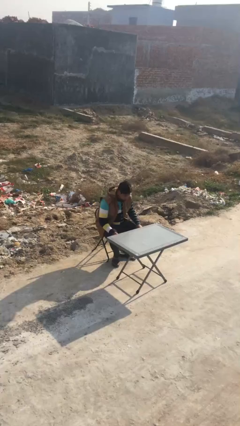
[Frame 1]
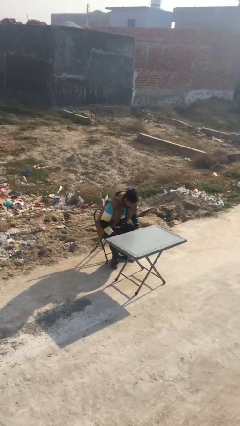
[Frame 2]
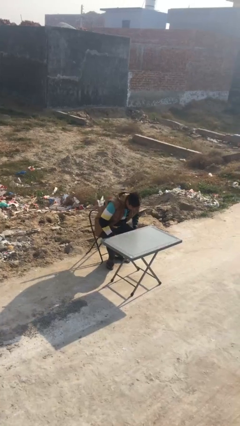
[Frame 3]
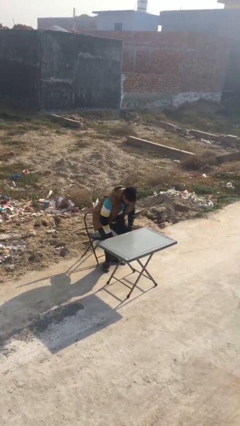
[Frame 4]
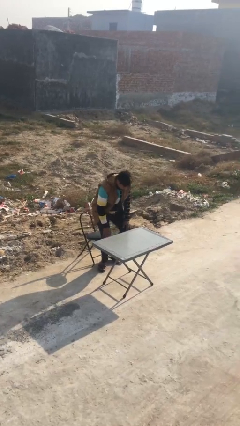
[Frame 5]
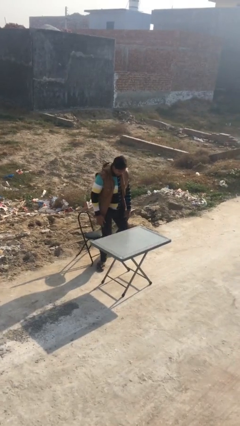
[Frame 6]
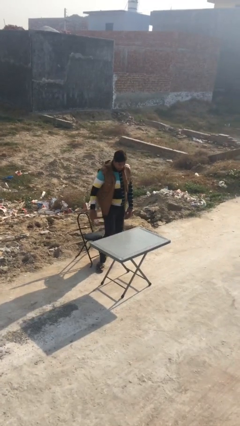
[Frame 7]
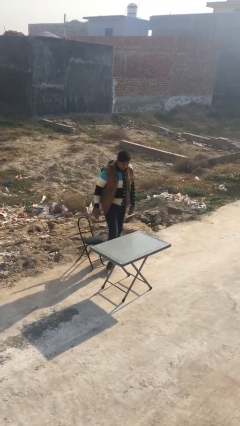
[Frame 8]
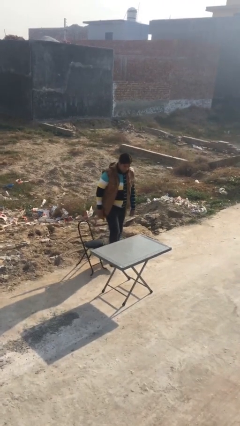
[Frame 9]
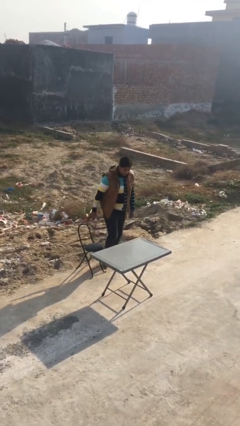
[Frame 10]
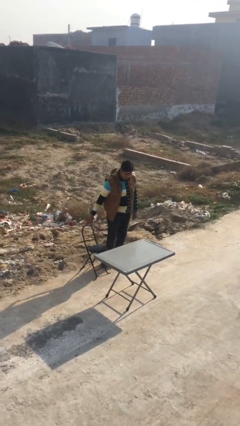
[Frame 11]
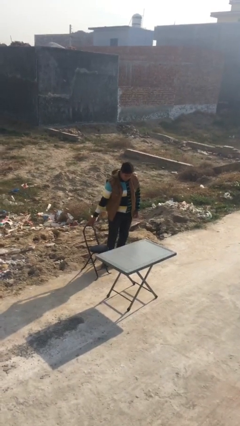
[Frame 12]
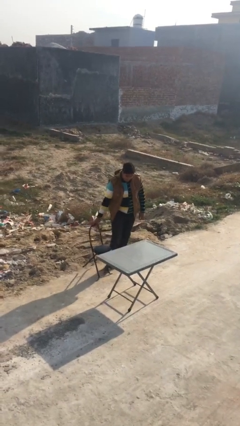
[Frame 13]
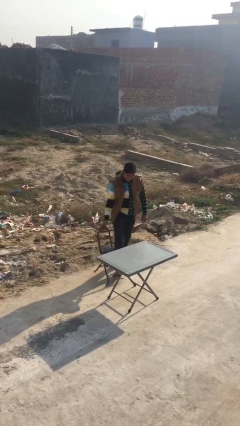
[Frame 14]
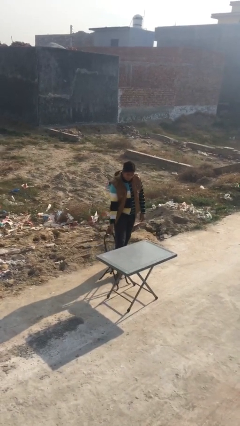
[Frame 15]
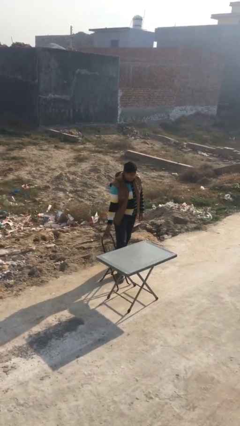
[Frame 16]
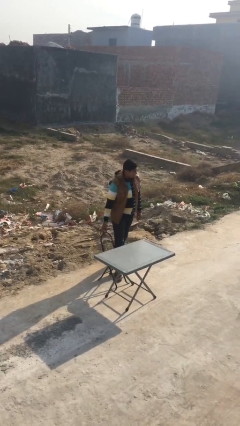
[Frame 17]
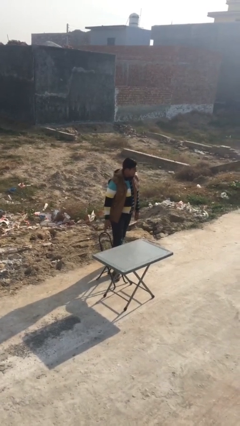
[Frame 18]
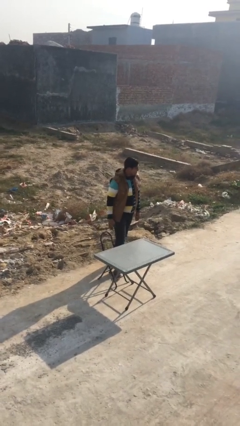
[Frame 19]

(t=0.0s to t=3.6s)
person stands up

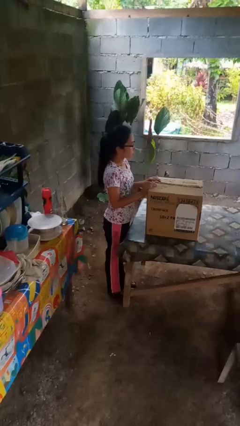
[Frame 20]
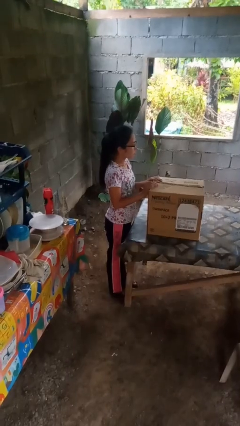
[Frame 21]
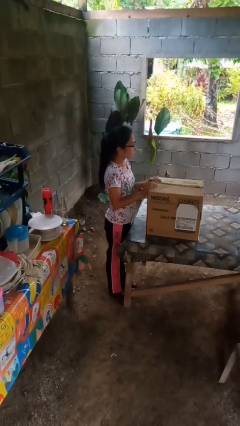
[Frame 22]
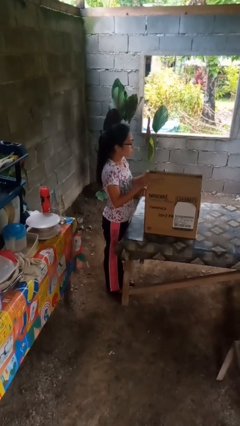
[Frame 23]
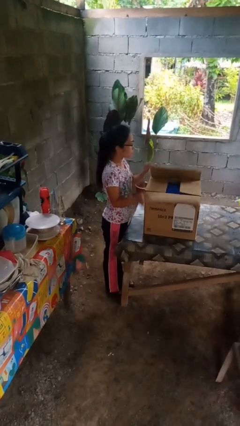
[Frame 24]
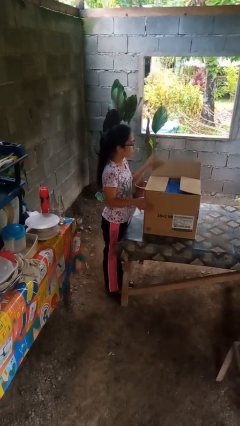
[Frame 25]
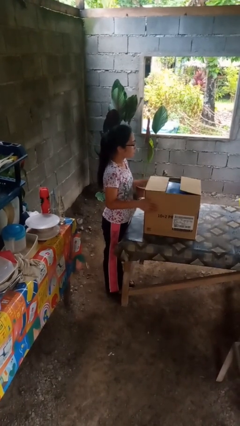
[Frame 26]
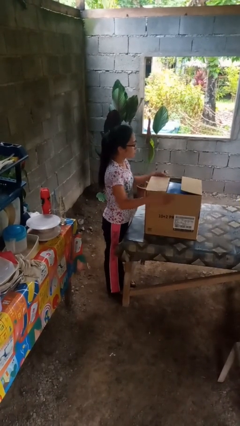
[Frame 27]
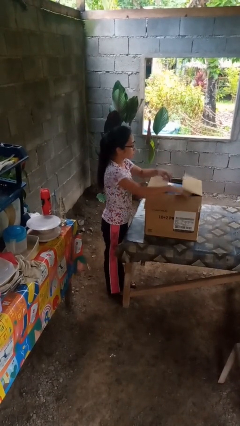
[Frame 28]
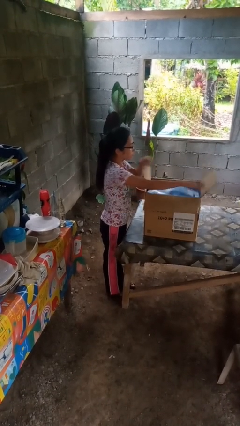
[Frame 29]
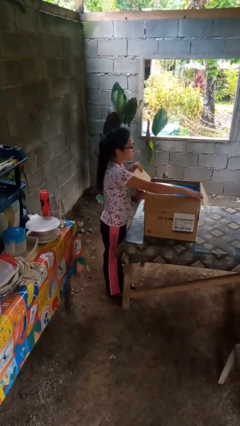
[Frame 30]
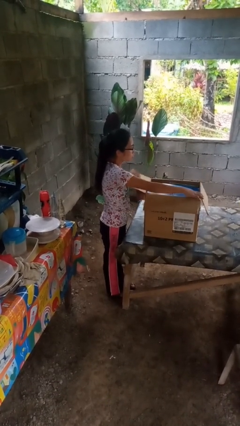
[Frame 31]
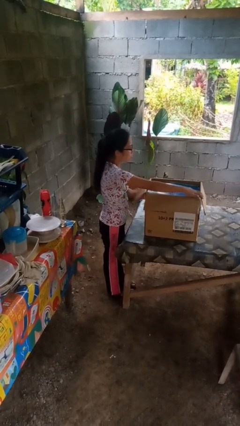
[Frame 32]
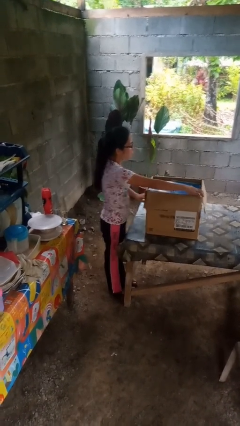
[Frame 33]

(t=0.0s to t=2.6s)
person opens box

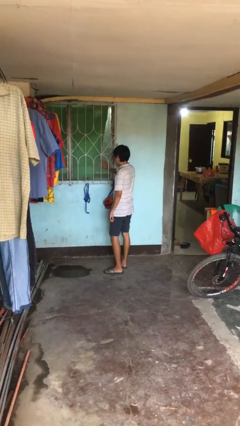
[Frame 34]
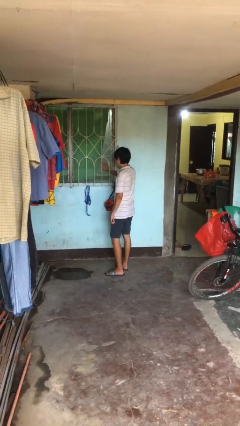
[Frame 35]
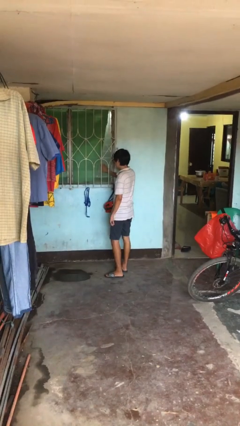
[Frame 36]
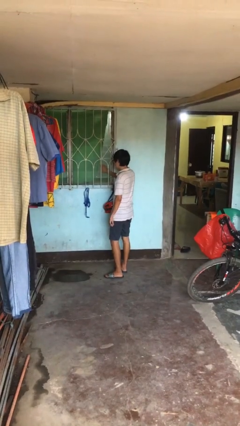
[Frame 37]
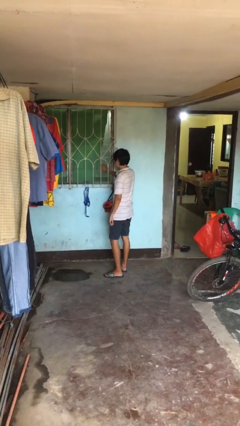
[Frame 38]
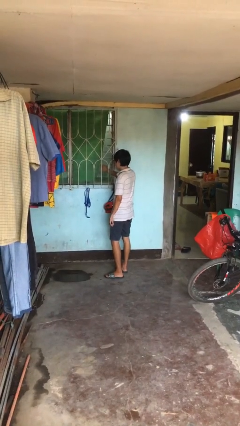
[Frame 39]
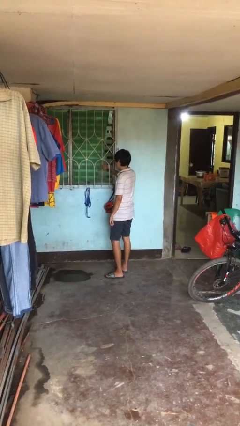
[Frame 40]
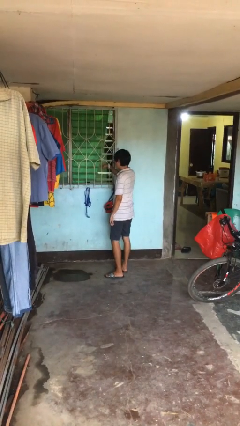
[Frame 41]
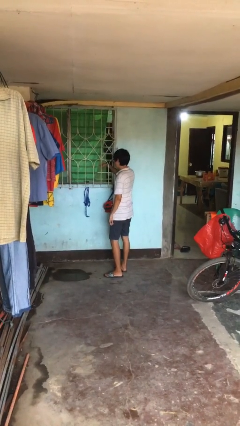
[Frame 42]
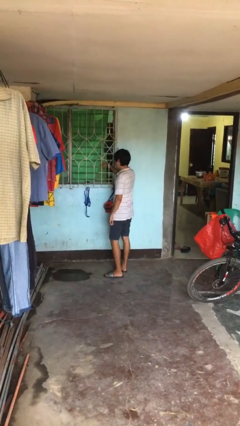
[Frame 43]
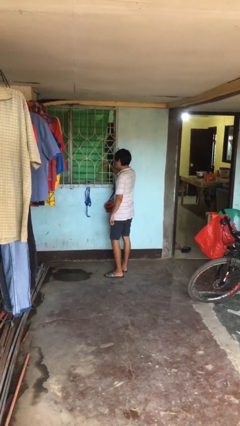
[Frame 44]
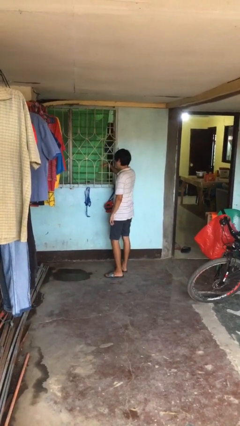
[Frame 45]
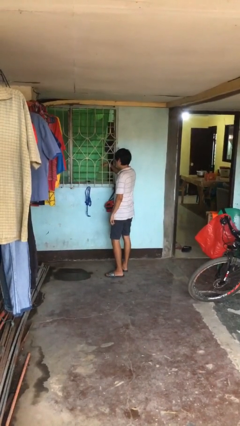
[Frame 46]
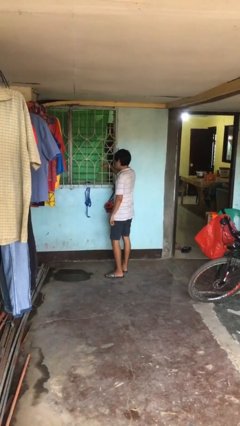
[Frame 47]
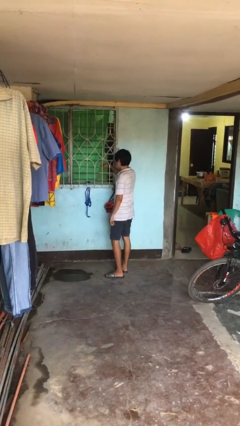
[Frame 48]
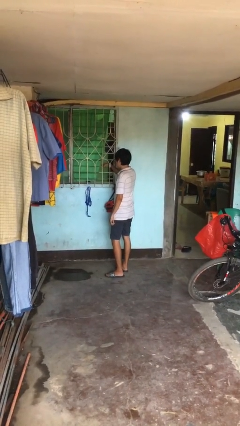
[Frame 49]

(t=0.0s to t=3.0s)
person opens home window

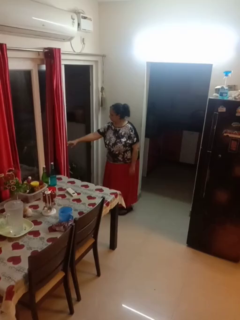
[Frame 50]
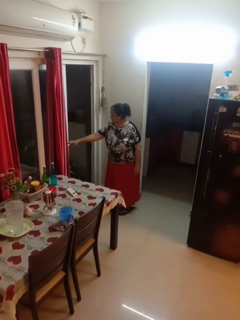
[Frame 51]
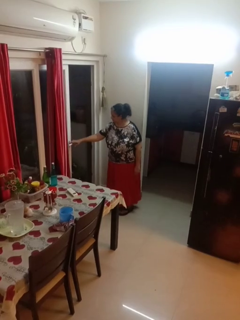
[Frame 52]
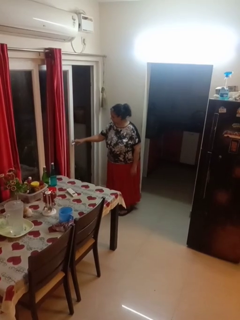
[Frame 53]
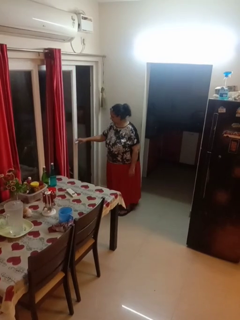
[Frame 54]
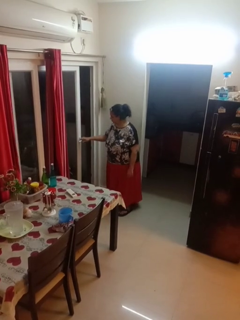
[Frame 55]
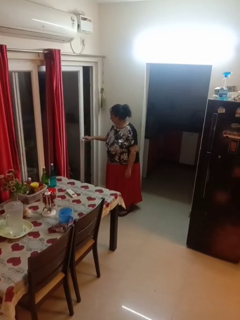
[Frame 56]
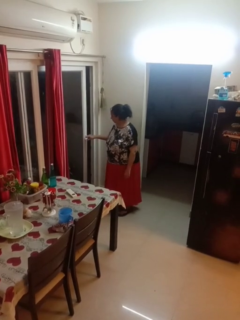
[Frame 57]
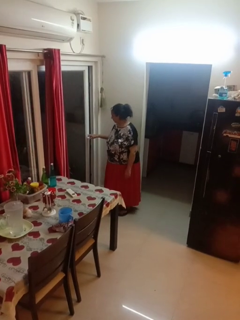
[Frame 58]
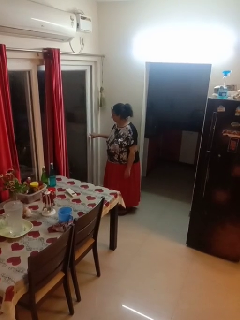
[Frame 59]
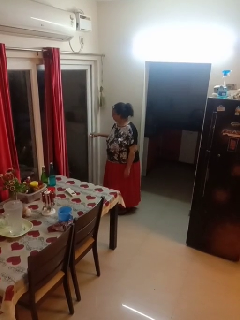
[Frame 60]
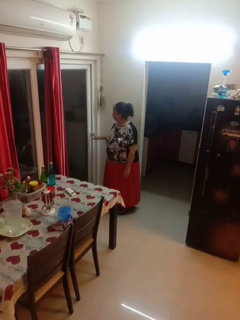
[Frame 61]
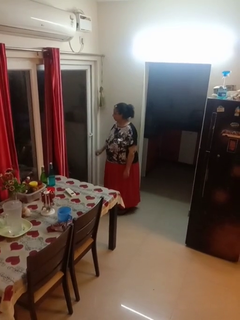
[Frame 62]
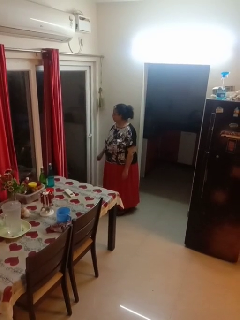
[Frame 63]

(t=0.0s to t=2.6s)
person closes sliding door

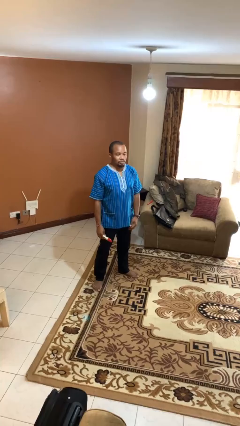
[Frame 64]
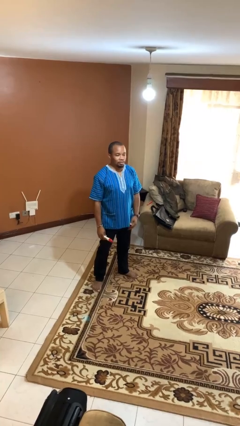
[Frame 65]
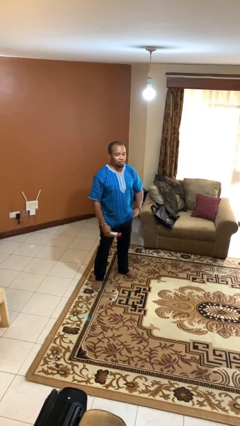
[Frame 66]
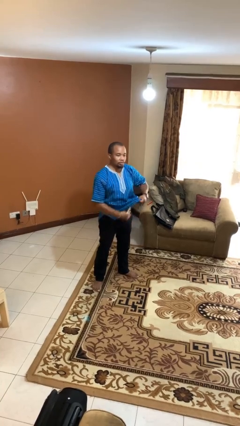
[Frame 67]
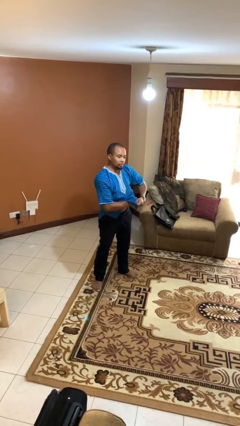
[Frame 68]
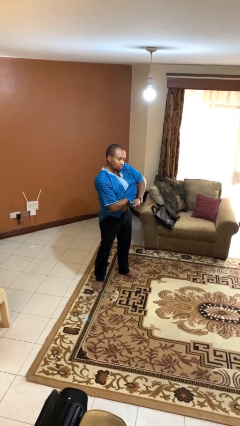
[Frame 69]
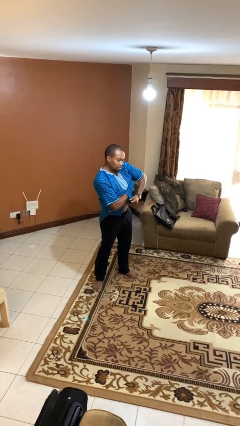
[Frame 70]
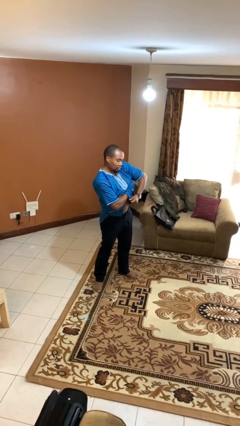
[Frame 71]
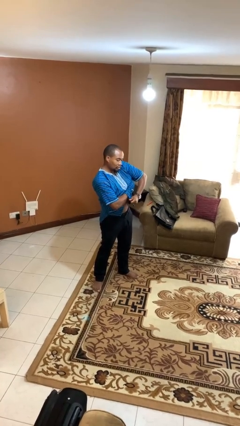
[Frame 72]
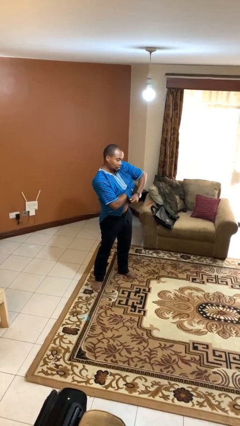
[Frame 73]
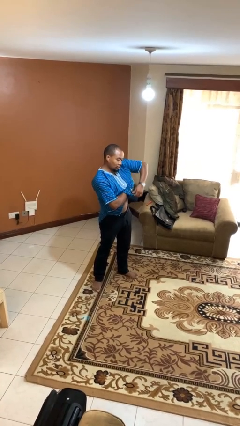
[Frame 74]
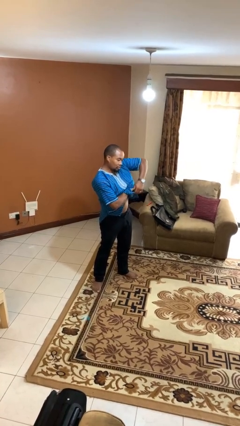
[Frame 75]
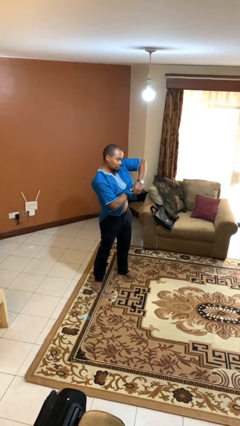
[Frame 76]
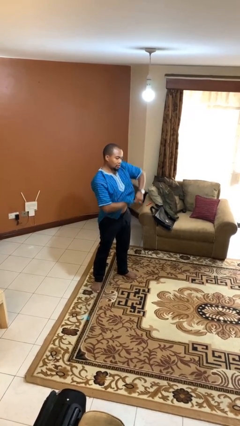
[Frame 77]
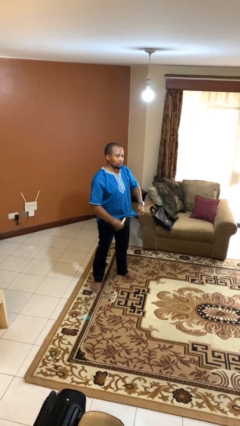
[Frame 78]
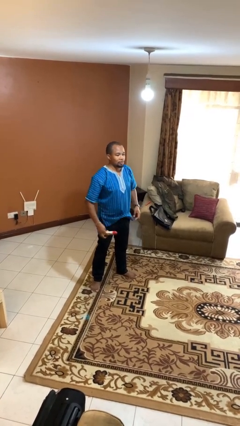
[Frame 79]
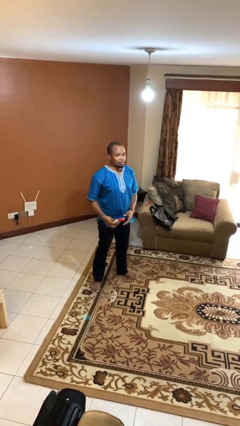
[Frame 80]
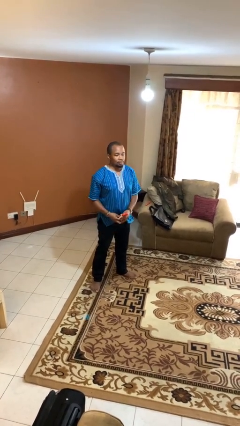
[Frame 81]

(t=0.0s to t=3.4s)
person applies deodorant

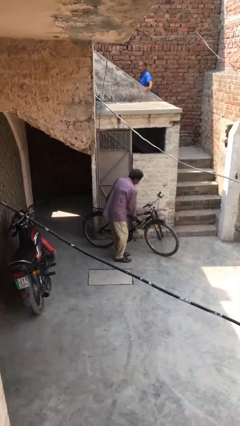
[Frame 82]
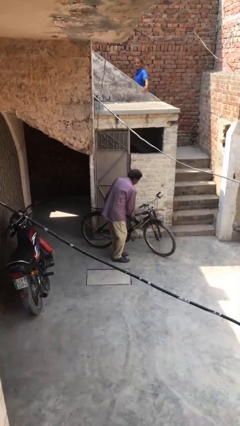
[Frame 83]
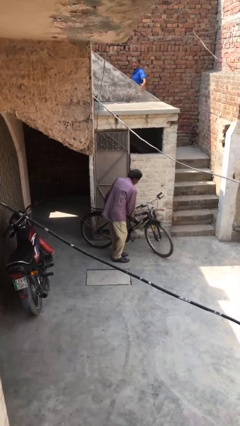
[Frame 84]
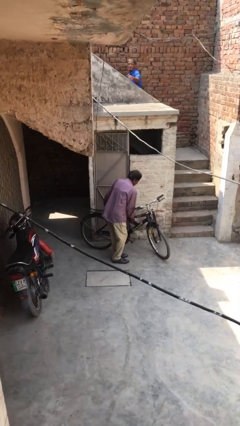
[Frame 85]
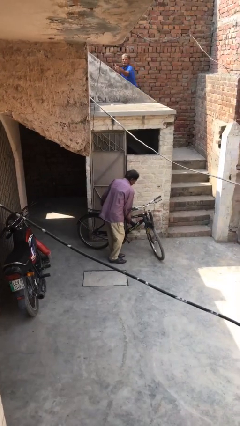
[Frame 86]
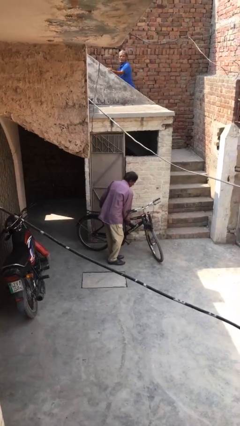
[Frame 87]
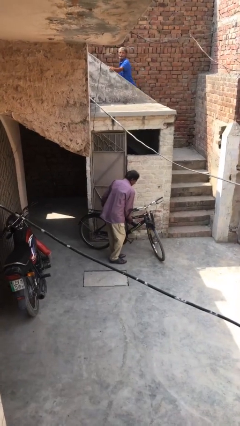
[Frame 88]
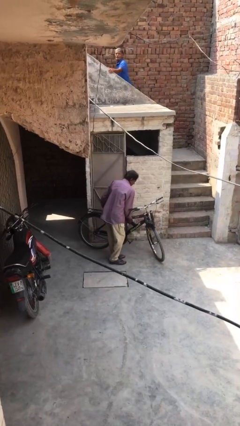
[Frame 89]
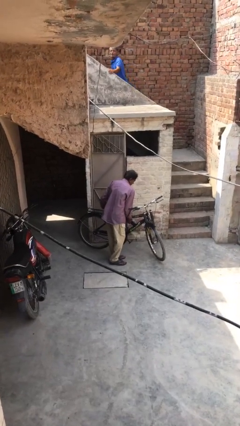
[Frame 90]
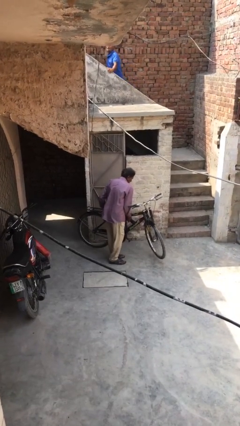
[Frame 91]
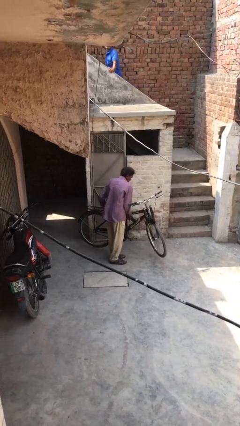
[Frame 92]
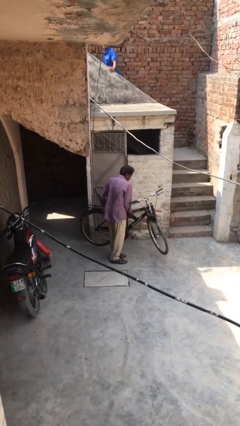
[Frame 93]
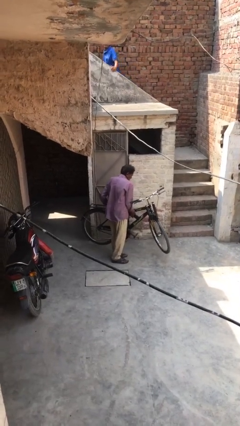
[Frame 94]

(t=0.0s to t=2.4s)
person picks up object from floor
